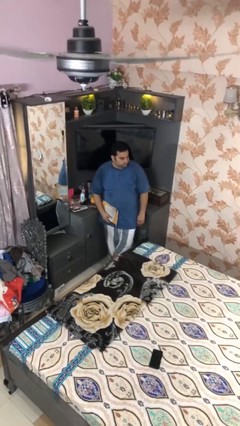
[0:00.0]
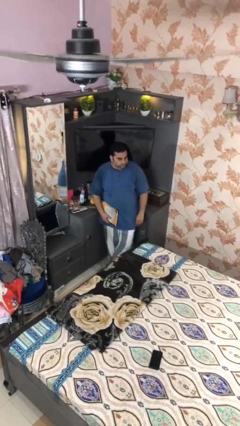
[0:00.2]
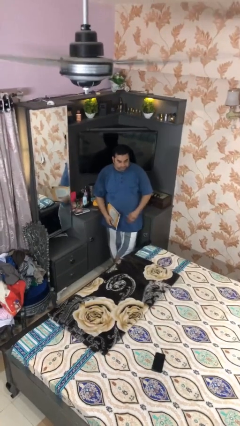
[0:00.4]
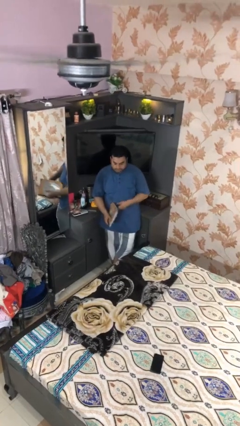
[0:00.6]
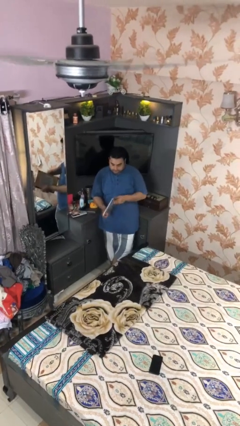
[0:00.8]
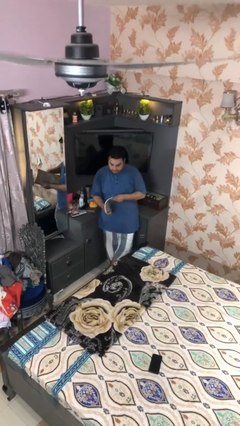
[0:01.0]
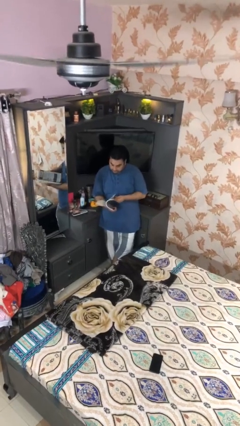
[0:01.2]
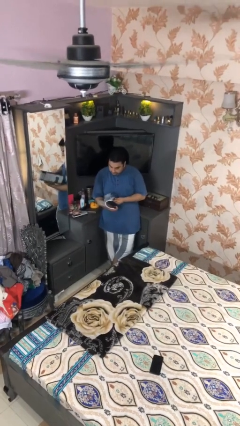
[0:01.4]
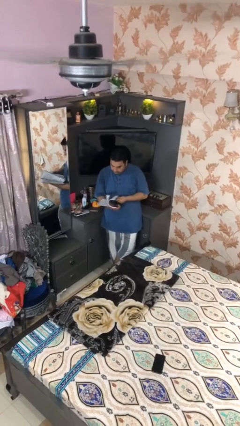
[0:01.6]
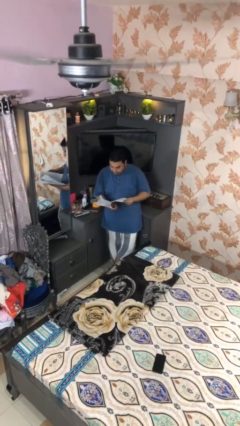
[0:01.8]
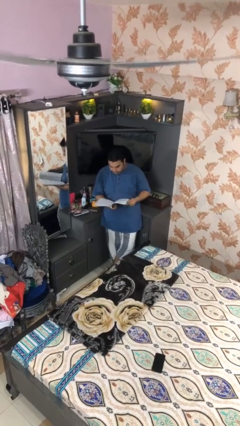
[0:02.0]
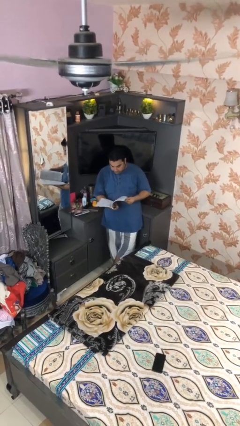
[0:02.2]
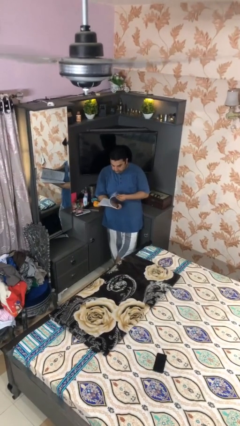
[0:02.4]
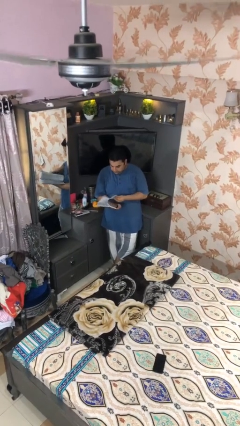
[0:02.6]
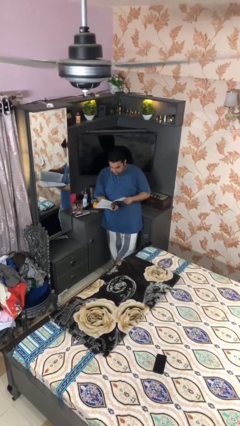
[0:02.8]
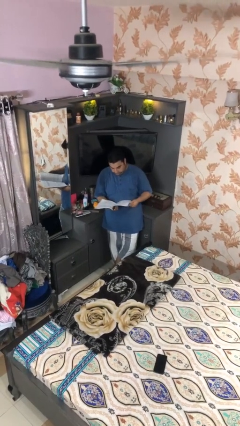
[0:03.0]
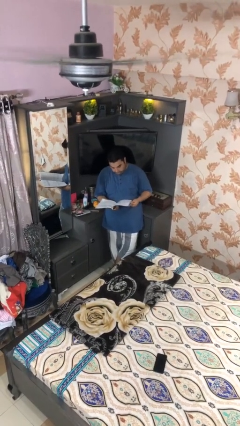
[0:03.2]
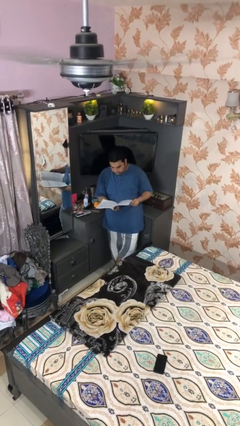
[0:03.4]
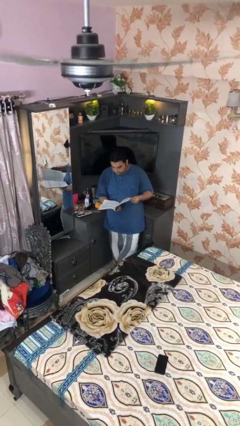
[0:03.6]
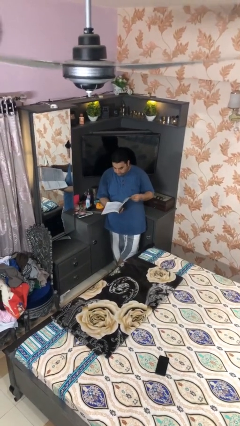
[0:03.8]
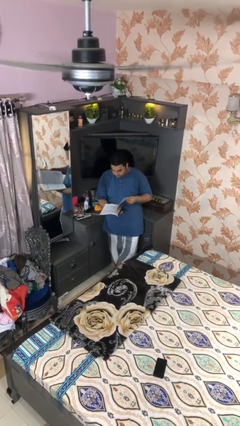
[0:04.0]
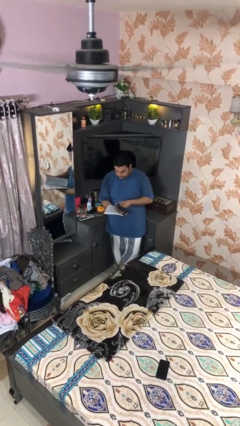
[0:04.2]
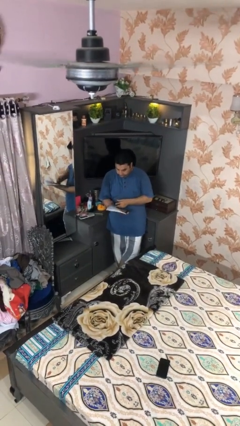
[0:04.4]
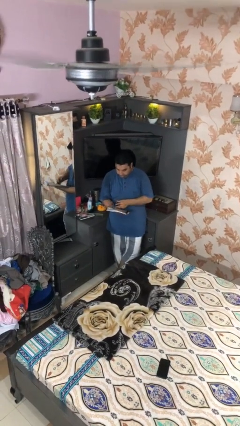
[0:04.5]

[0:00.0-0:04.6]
person reads book

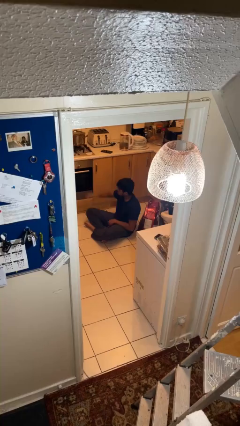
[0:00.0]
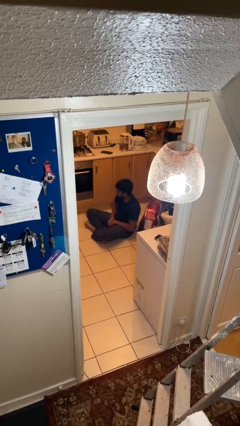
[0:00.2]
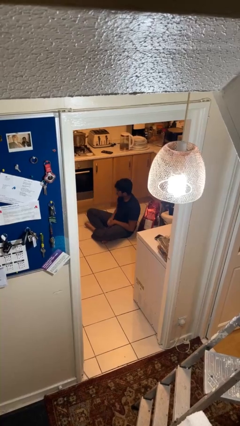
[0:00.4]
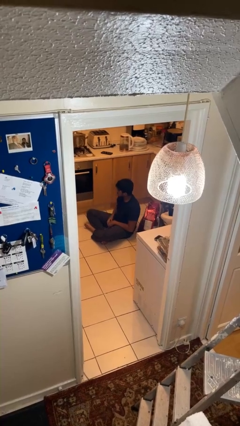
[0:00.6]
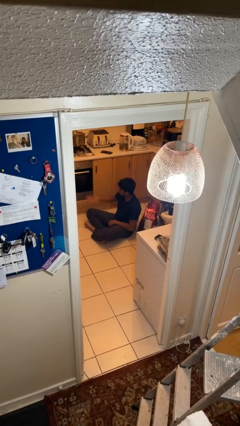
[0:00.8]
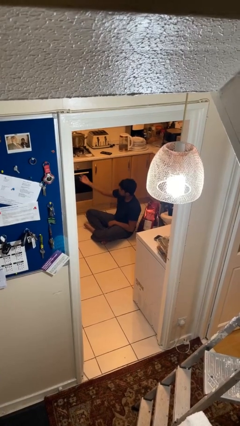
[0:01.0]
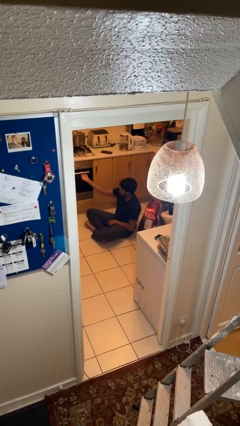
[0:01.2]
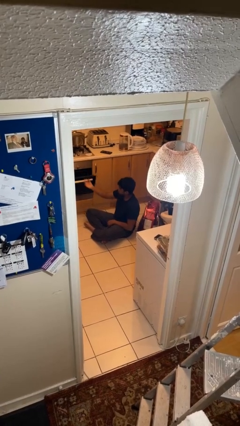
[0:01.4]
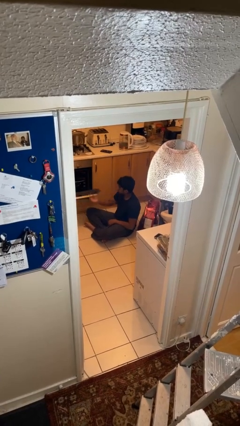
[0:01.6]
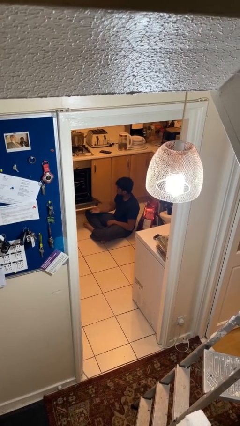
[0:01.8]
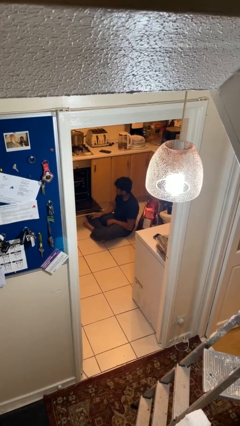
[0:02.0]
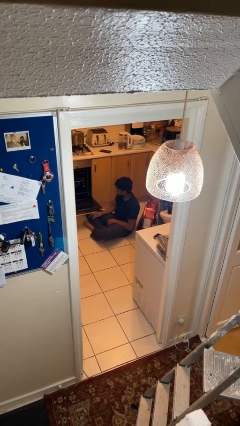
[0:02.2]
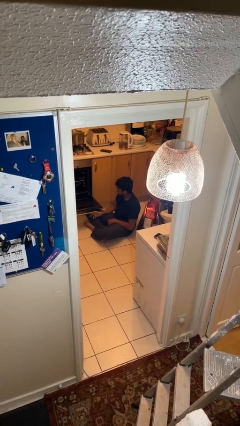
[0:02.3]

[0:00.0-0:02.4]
person opens oven door

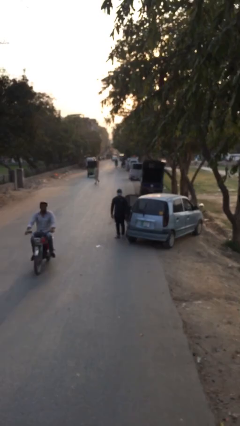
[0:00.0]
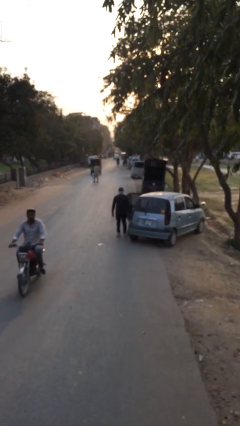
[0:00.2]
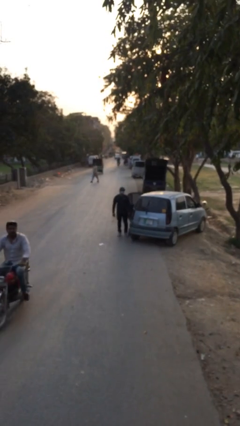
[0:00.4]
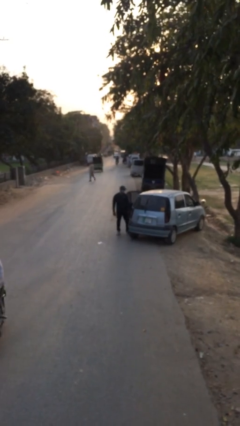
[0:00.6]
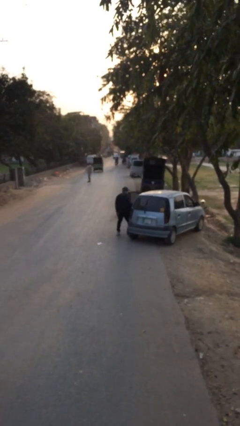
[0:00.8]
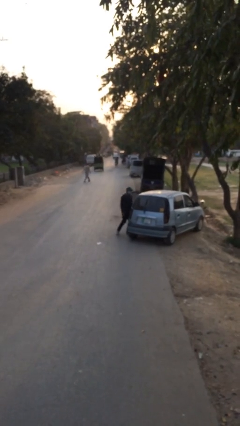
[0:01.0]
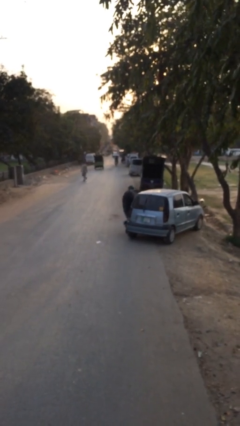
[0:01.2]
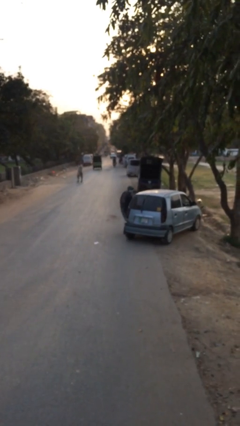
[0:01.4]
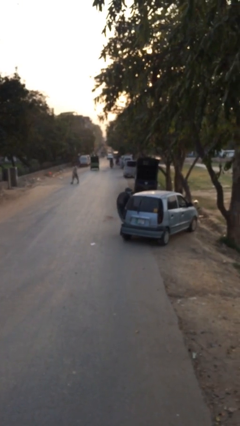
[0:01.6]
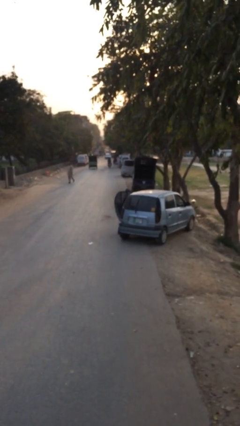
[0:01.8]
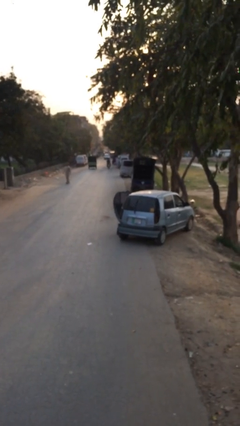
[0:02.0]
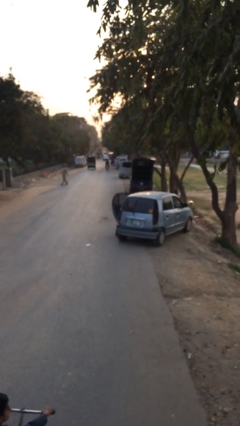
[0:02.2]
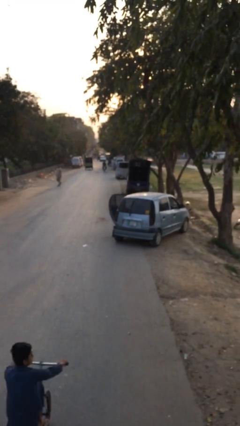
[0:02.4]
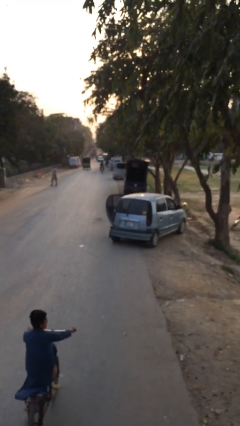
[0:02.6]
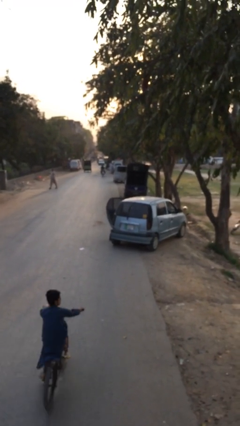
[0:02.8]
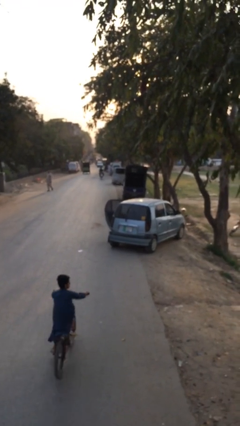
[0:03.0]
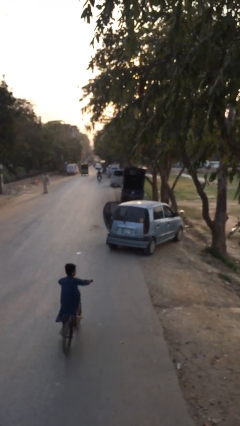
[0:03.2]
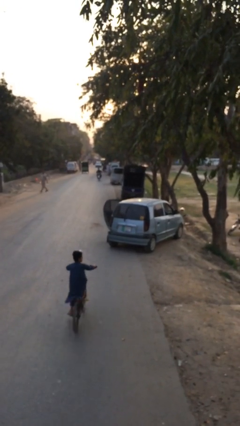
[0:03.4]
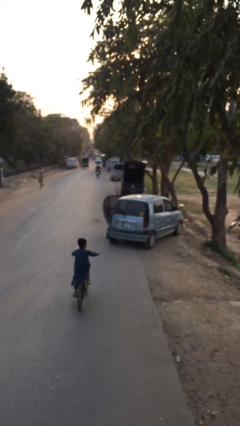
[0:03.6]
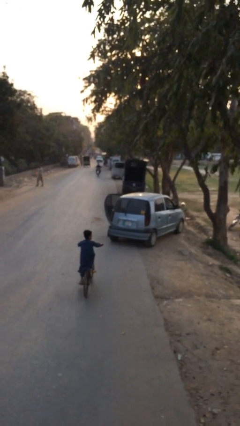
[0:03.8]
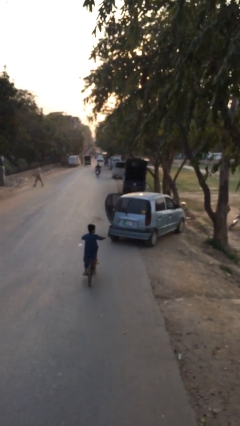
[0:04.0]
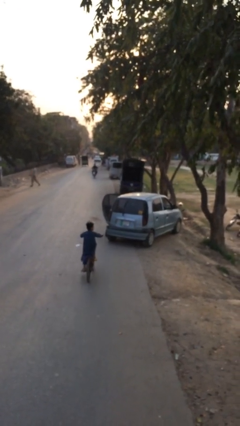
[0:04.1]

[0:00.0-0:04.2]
person enters car

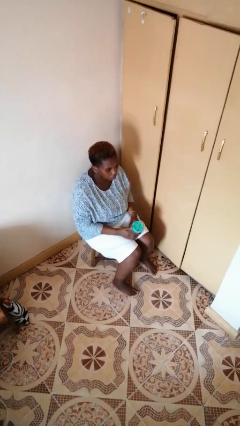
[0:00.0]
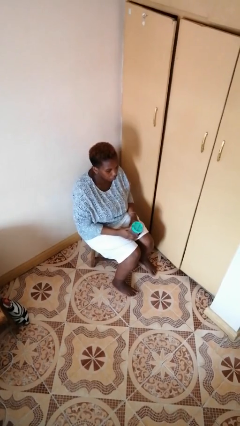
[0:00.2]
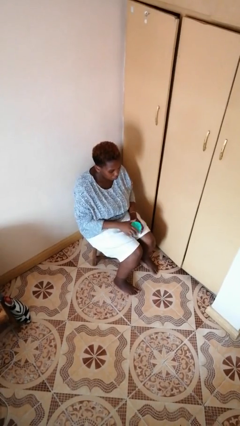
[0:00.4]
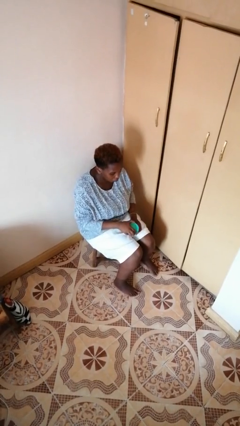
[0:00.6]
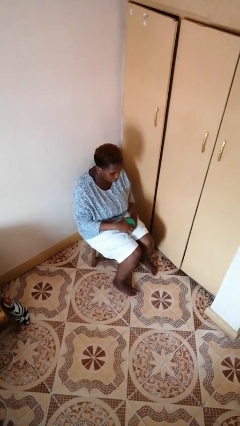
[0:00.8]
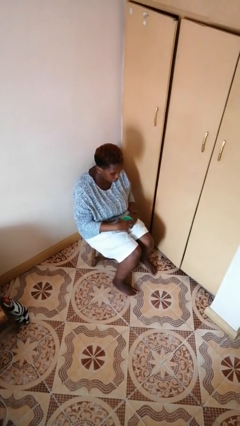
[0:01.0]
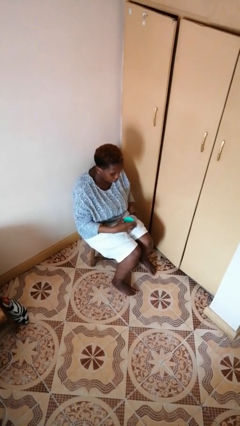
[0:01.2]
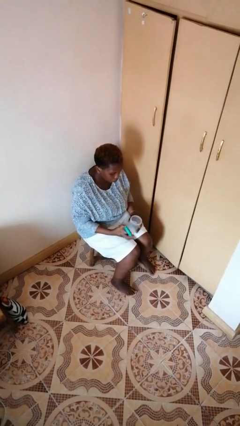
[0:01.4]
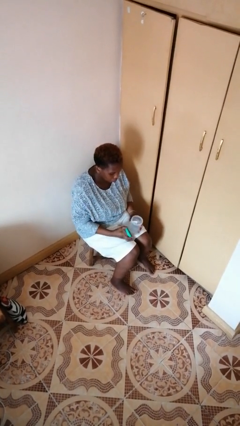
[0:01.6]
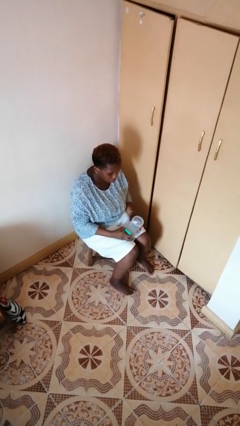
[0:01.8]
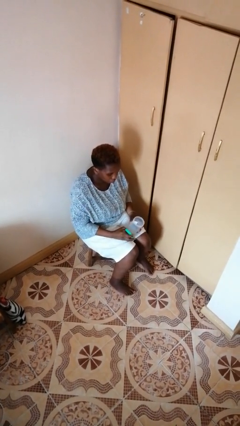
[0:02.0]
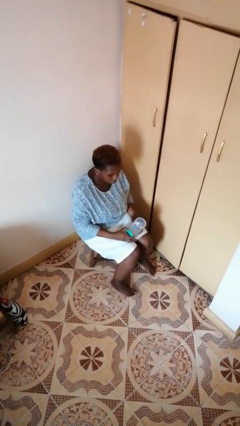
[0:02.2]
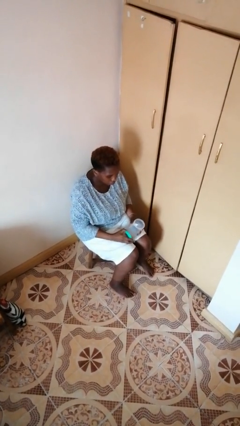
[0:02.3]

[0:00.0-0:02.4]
person opens jar

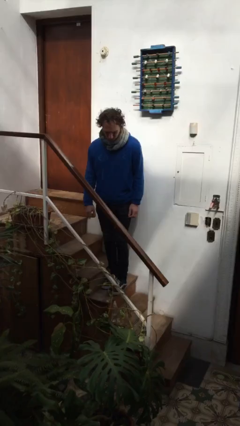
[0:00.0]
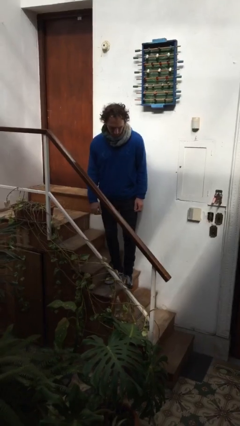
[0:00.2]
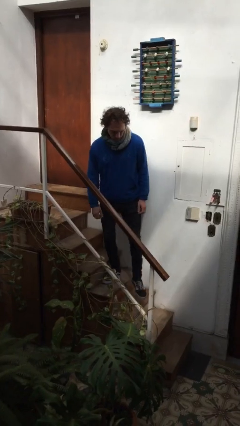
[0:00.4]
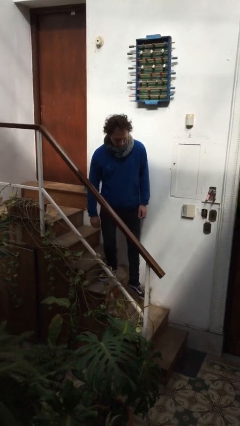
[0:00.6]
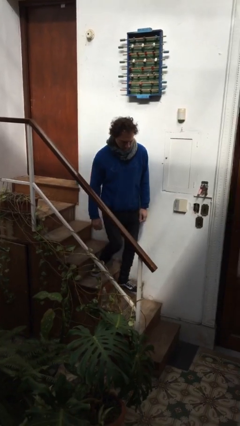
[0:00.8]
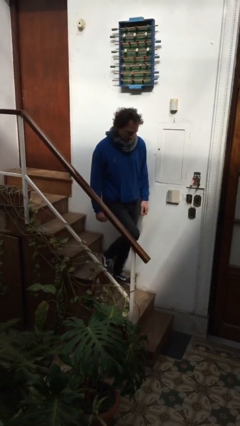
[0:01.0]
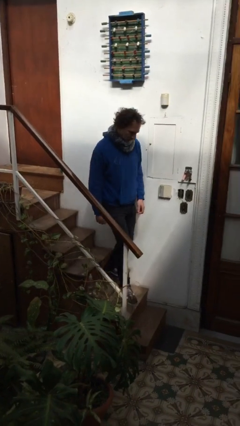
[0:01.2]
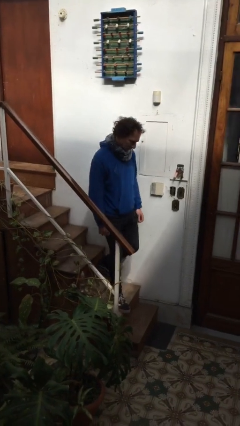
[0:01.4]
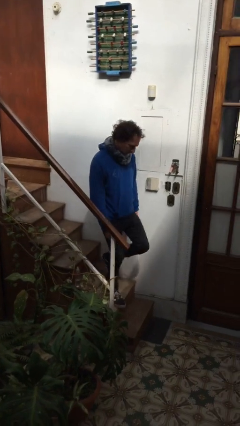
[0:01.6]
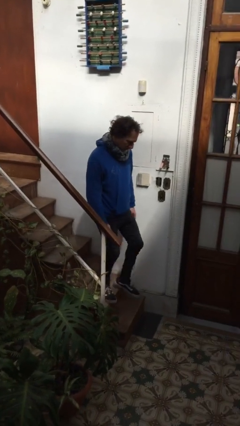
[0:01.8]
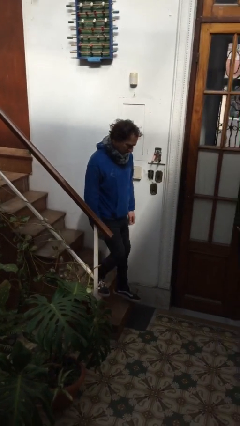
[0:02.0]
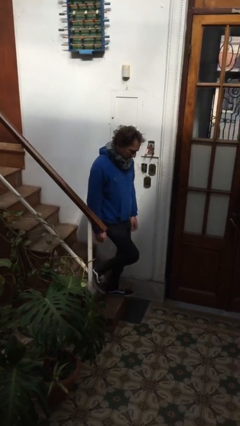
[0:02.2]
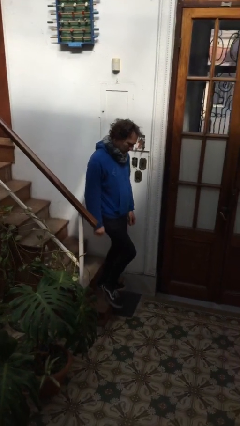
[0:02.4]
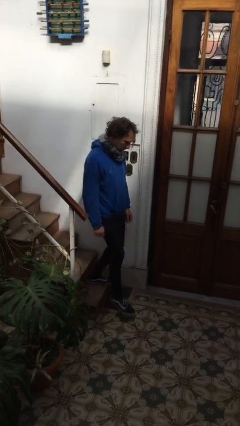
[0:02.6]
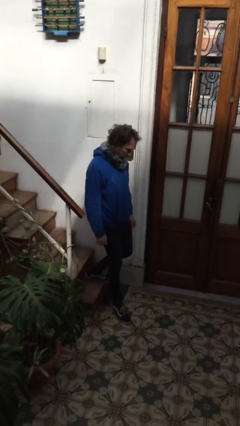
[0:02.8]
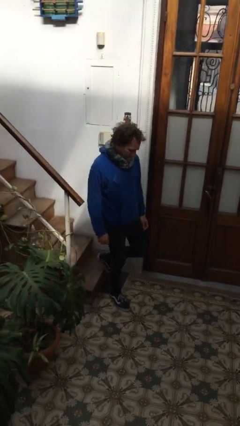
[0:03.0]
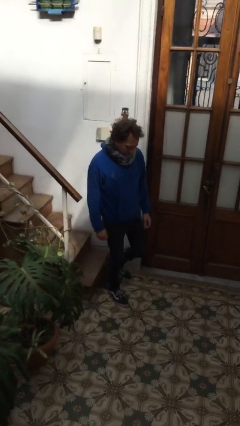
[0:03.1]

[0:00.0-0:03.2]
person climbs down stairs

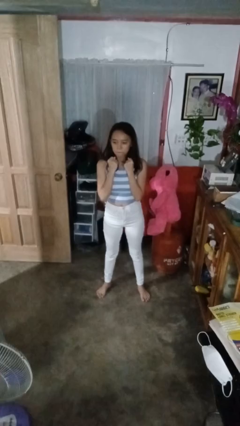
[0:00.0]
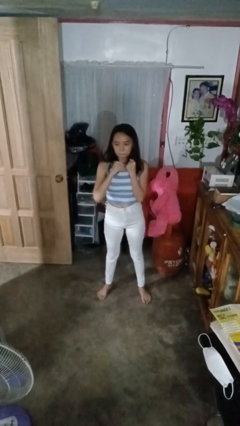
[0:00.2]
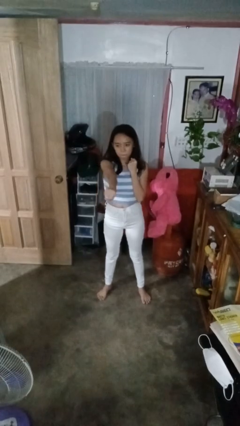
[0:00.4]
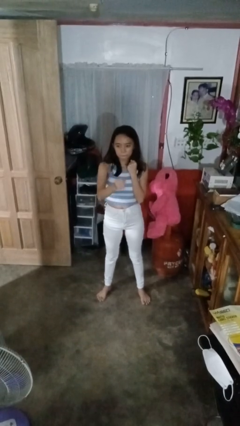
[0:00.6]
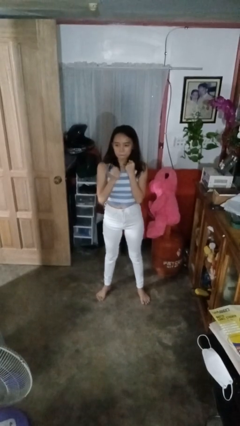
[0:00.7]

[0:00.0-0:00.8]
person punches
